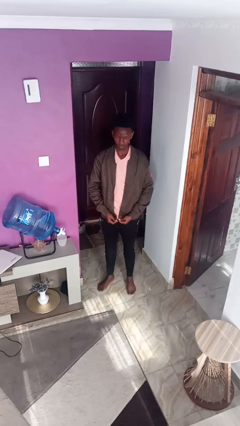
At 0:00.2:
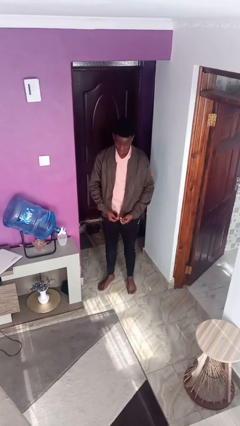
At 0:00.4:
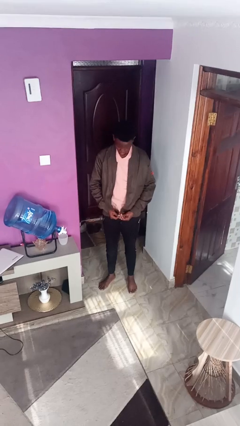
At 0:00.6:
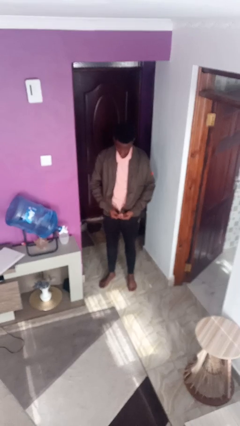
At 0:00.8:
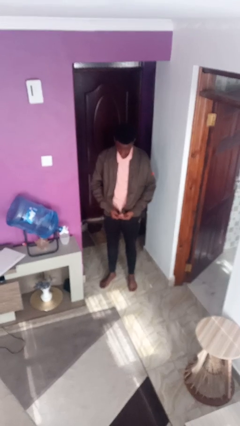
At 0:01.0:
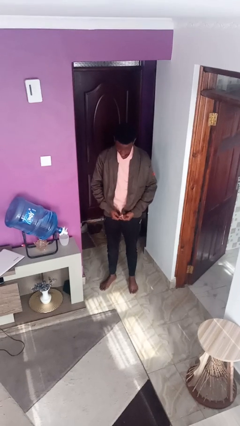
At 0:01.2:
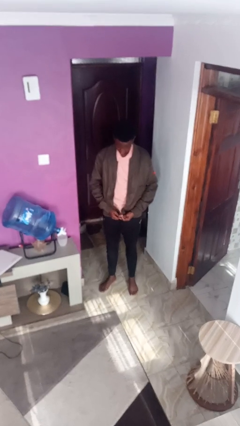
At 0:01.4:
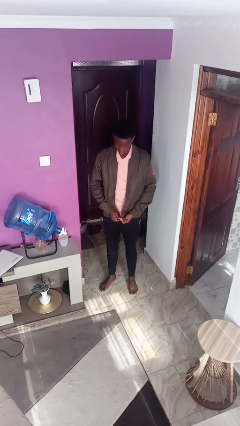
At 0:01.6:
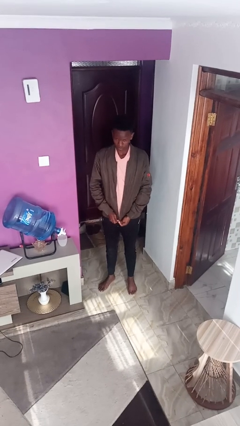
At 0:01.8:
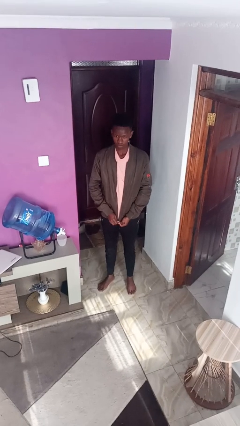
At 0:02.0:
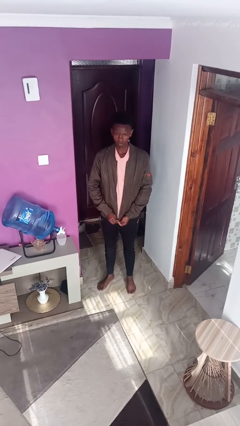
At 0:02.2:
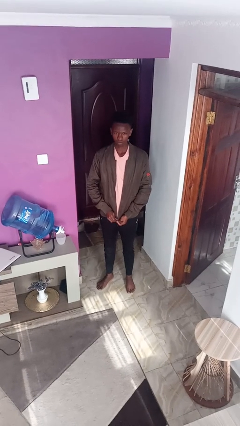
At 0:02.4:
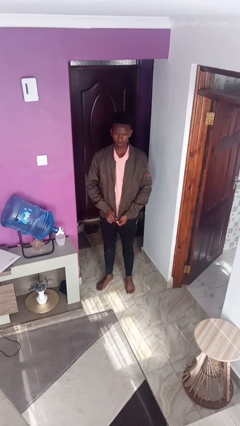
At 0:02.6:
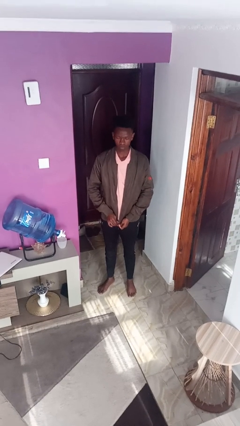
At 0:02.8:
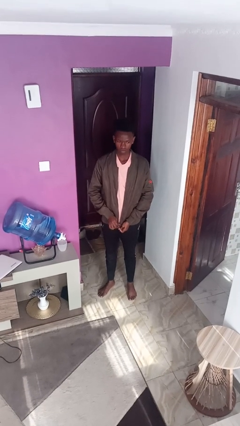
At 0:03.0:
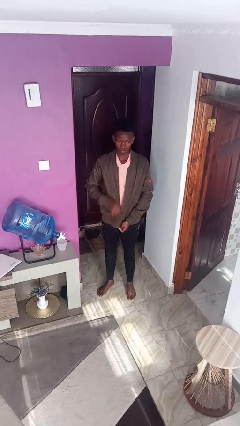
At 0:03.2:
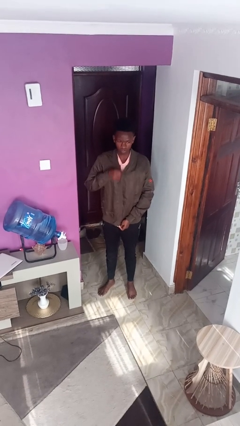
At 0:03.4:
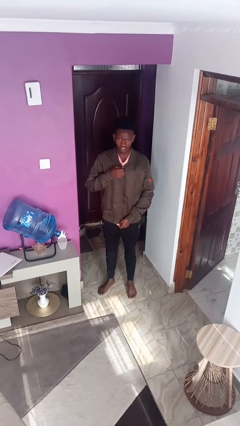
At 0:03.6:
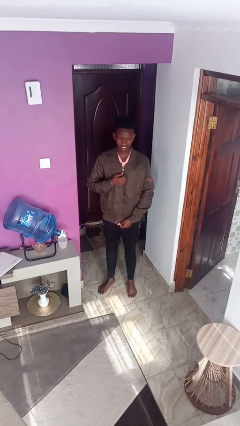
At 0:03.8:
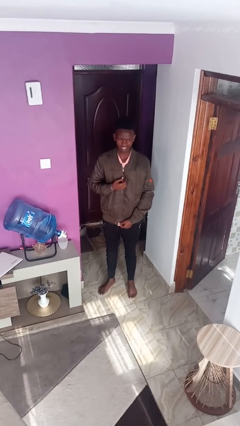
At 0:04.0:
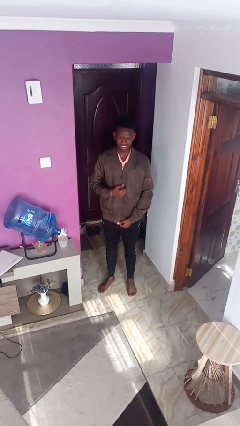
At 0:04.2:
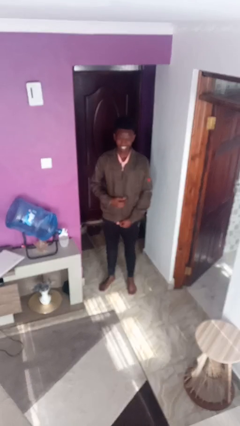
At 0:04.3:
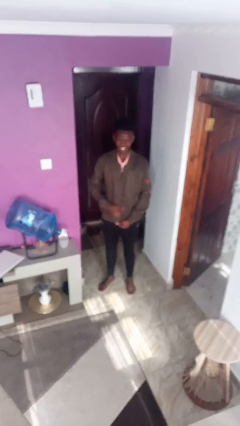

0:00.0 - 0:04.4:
person zips up jacket

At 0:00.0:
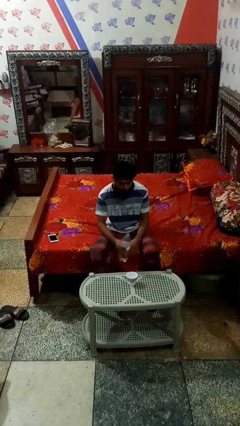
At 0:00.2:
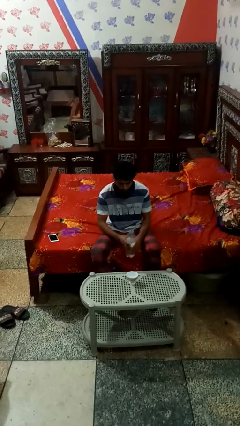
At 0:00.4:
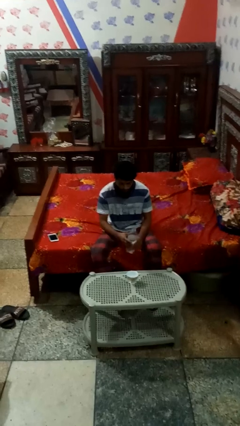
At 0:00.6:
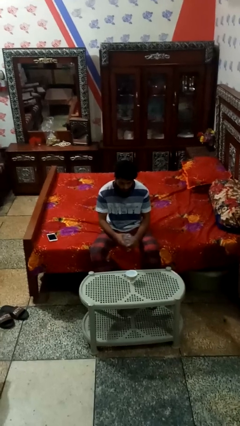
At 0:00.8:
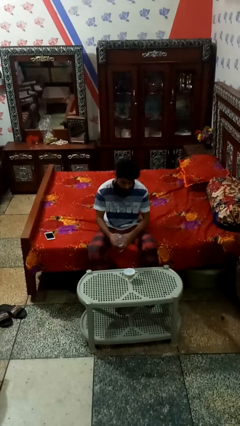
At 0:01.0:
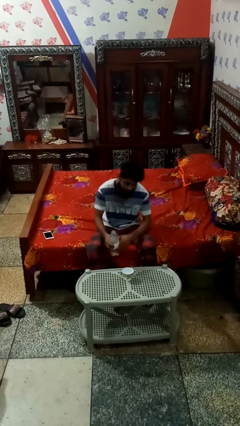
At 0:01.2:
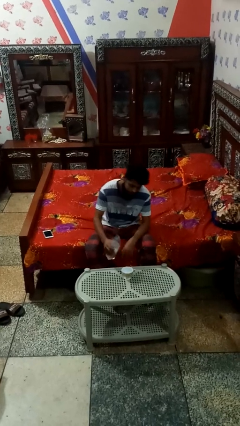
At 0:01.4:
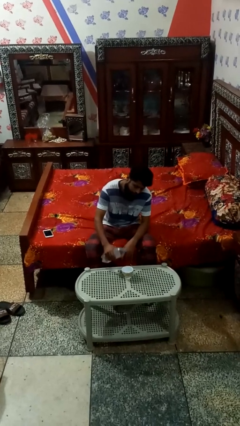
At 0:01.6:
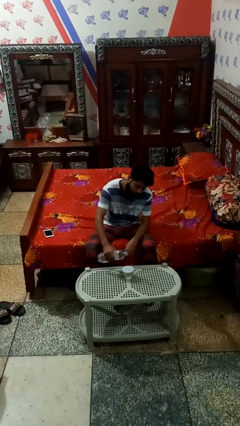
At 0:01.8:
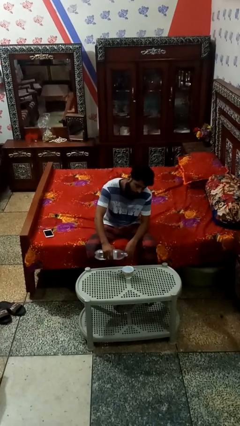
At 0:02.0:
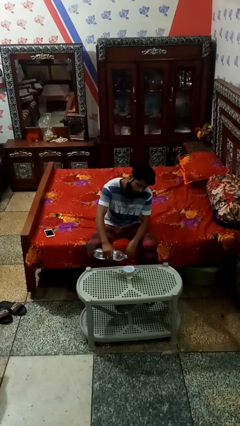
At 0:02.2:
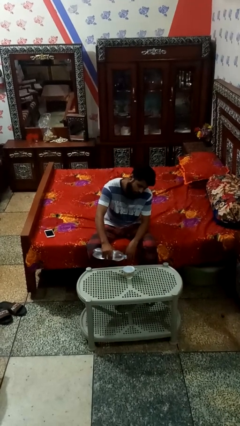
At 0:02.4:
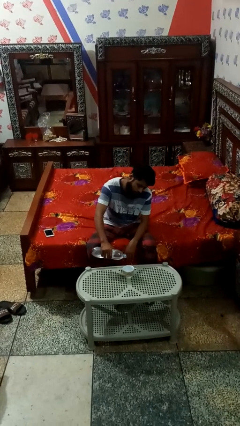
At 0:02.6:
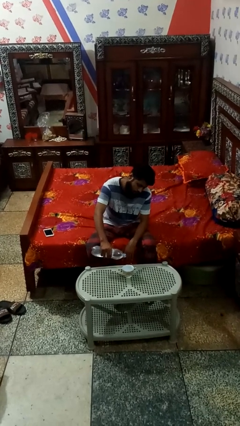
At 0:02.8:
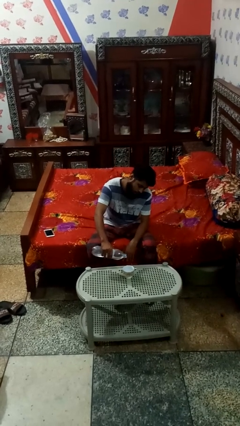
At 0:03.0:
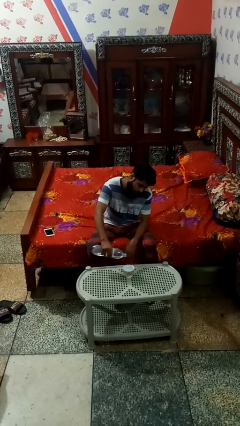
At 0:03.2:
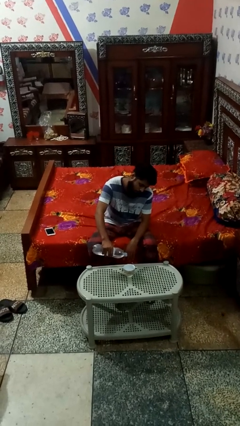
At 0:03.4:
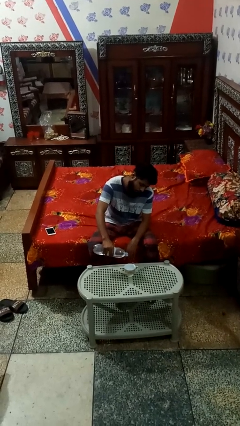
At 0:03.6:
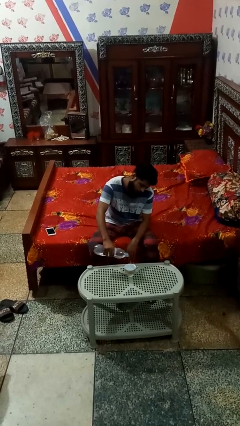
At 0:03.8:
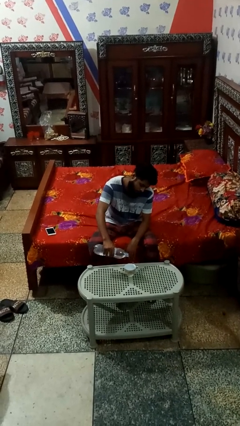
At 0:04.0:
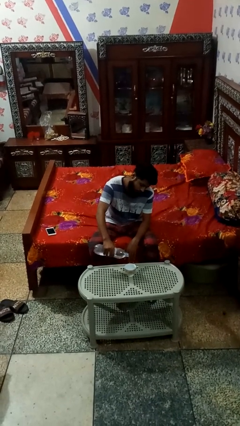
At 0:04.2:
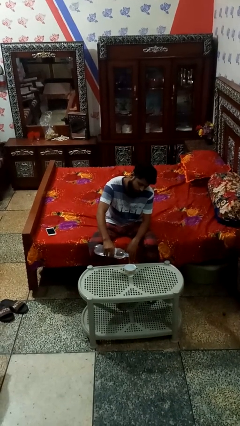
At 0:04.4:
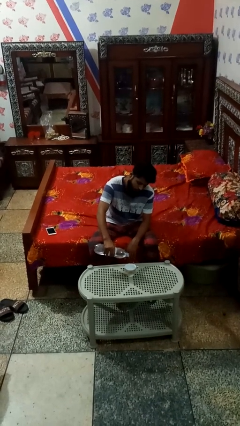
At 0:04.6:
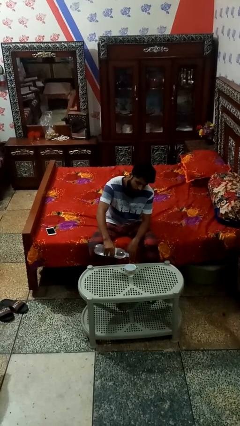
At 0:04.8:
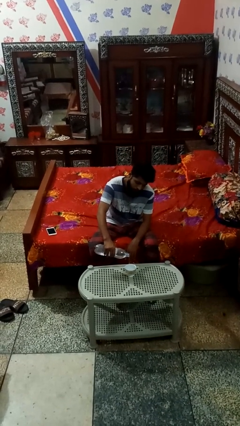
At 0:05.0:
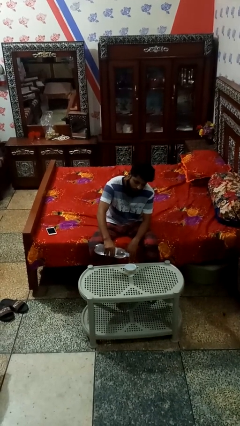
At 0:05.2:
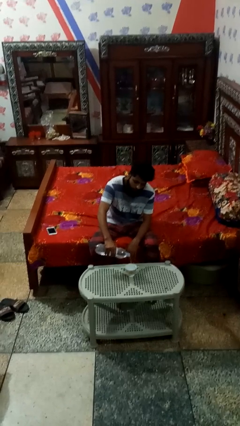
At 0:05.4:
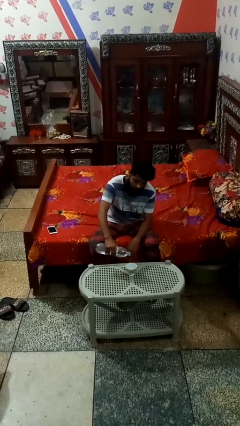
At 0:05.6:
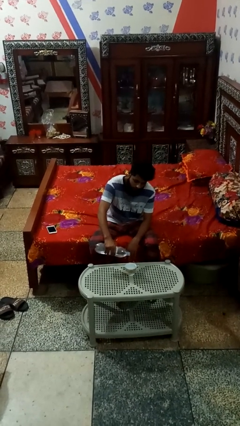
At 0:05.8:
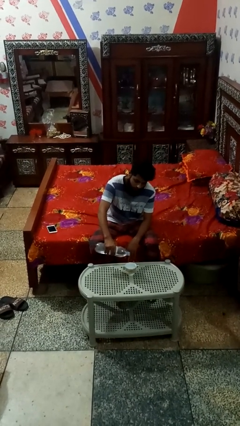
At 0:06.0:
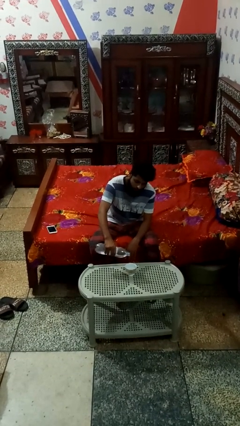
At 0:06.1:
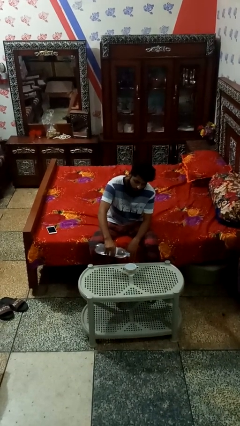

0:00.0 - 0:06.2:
person pours liquid into cup

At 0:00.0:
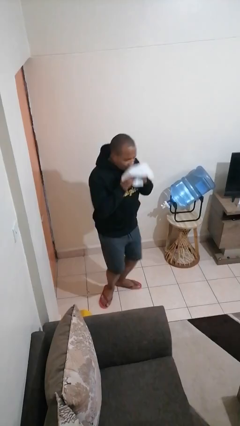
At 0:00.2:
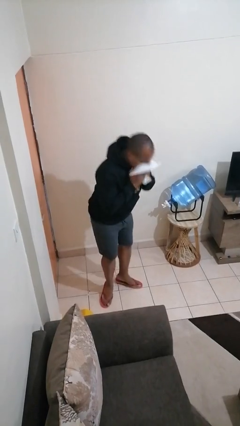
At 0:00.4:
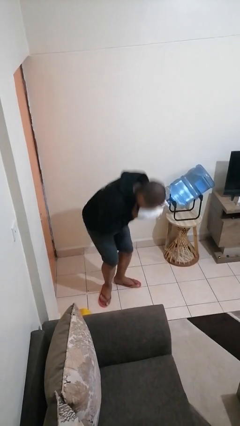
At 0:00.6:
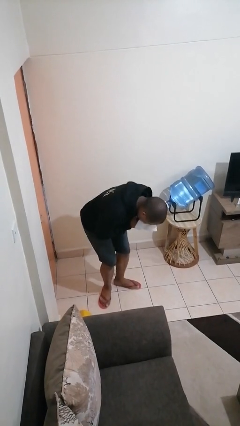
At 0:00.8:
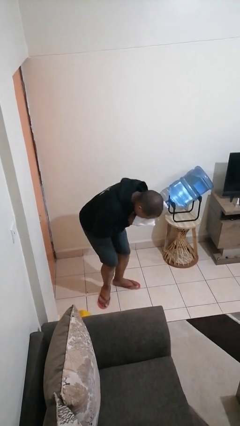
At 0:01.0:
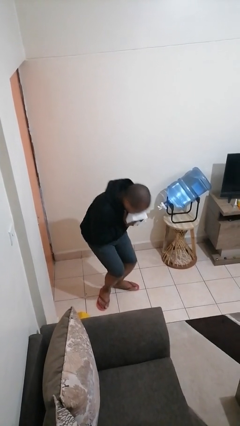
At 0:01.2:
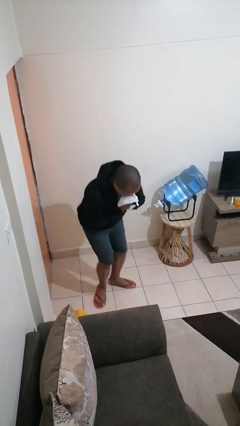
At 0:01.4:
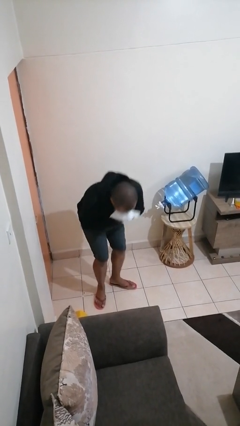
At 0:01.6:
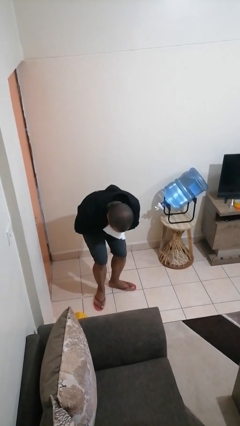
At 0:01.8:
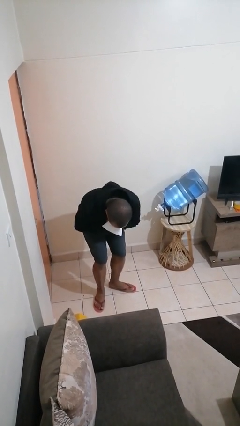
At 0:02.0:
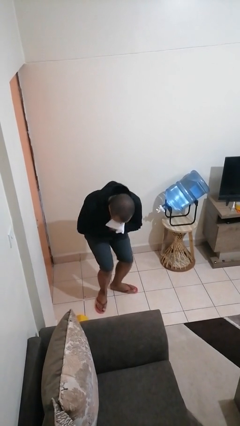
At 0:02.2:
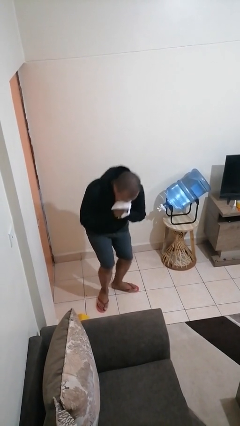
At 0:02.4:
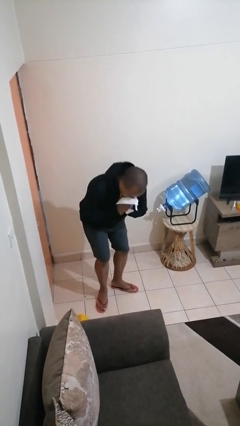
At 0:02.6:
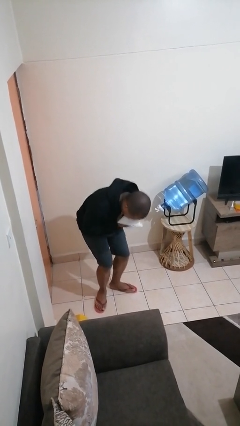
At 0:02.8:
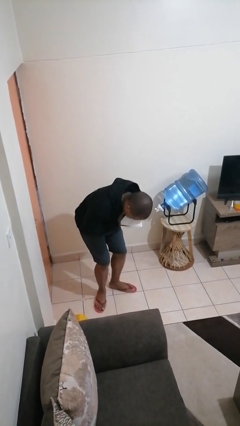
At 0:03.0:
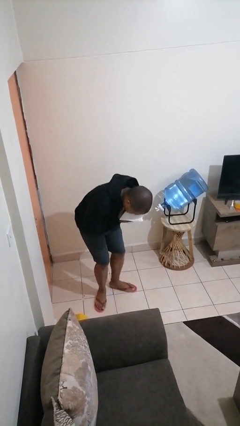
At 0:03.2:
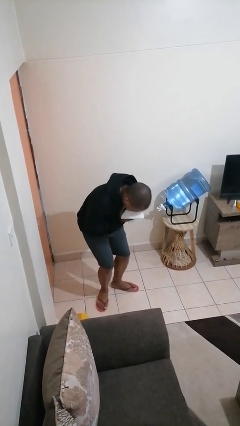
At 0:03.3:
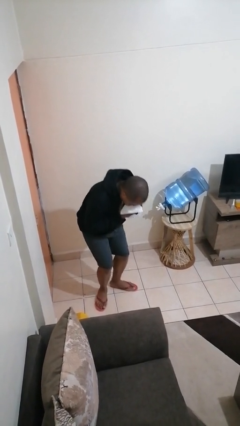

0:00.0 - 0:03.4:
person blows nose

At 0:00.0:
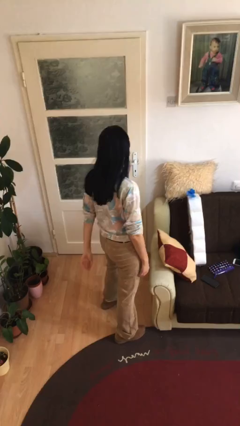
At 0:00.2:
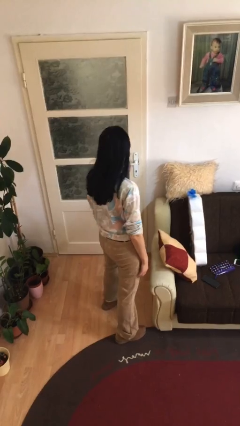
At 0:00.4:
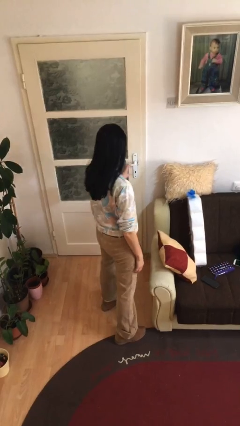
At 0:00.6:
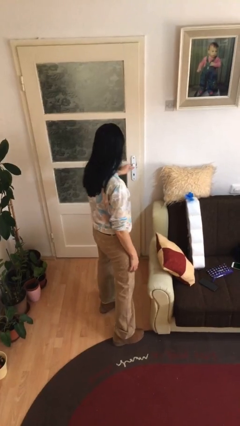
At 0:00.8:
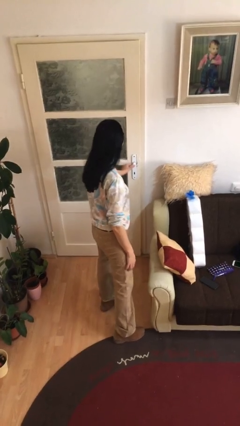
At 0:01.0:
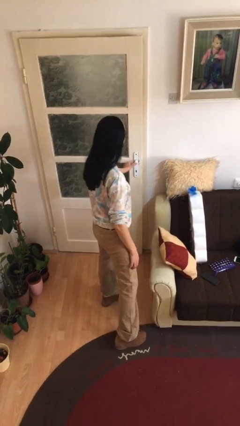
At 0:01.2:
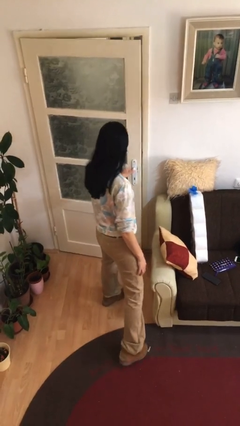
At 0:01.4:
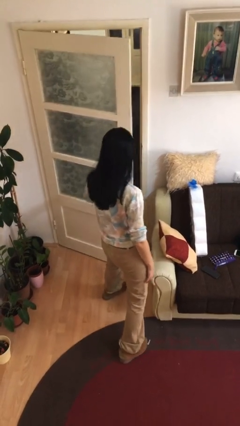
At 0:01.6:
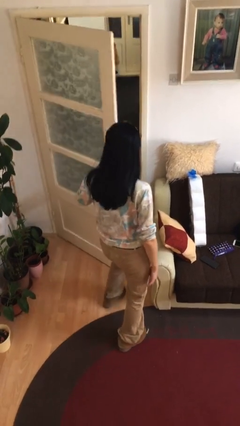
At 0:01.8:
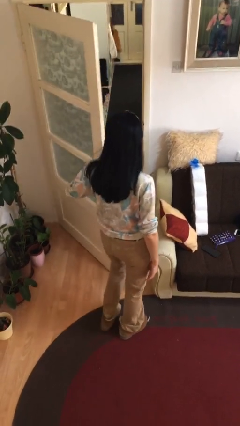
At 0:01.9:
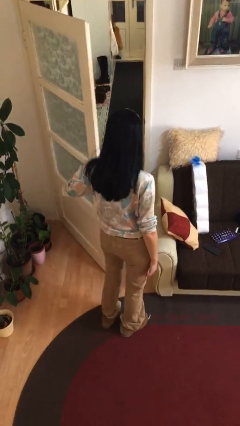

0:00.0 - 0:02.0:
person opens facility door

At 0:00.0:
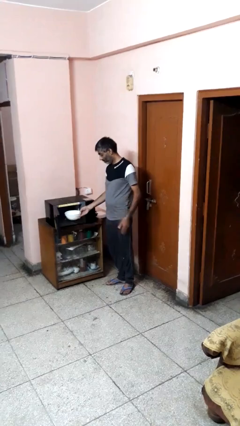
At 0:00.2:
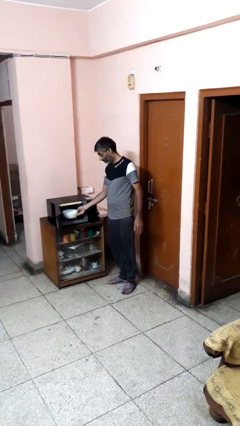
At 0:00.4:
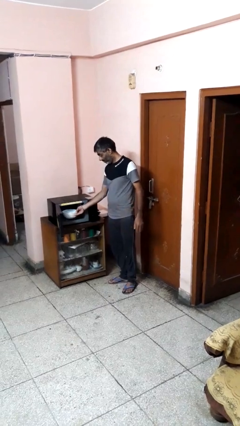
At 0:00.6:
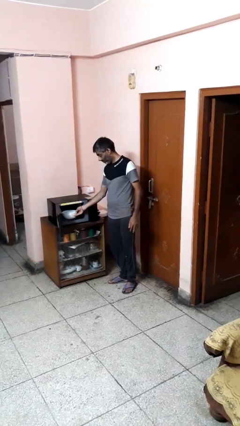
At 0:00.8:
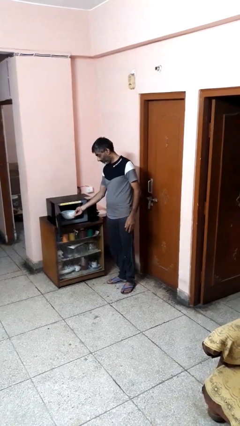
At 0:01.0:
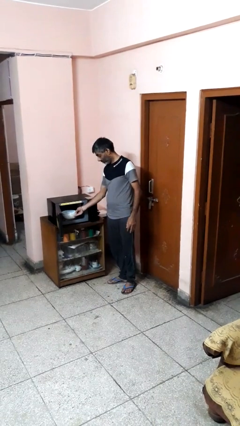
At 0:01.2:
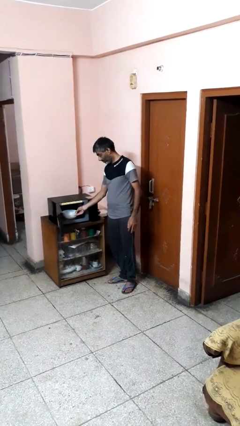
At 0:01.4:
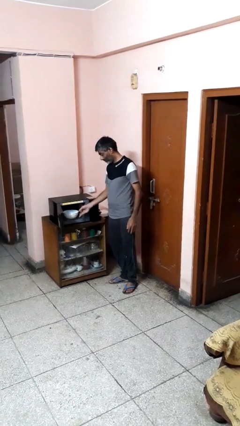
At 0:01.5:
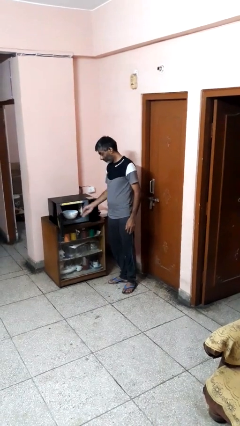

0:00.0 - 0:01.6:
person puts object into microwave

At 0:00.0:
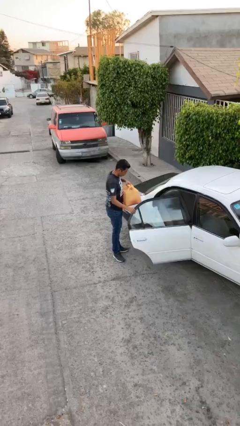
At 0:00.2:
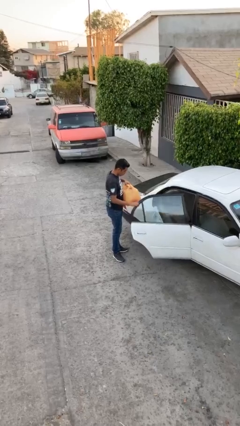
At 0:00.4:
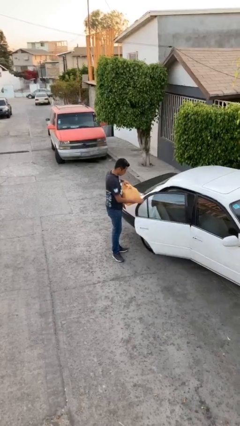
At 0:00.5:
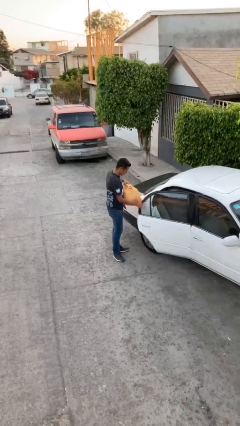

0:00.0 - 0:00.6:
person closes car door
